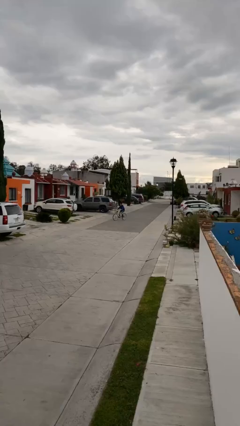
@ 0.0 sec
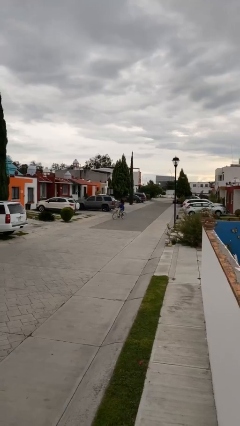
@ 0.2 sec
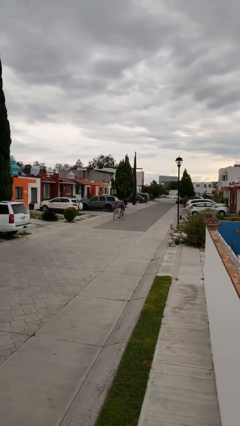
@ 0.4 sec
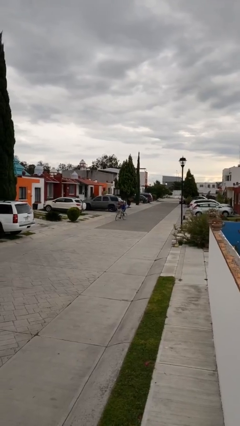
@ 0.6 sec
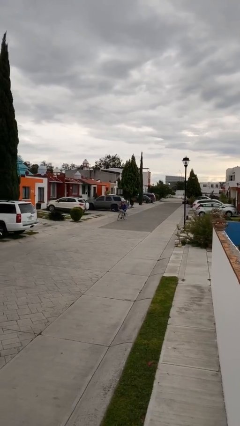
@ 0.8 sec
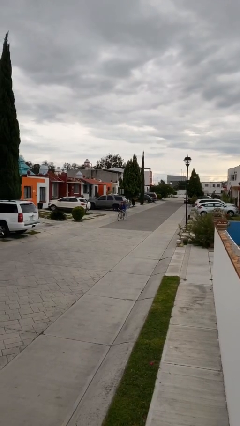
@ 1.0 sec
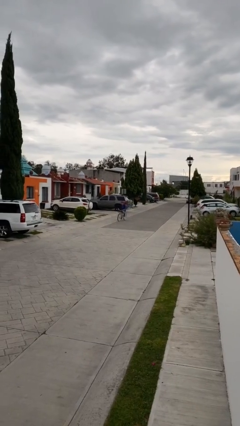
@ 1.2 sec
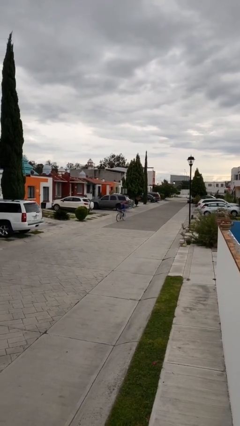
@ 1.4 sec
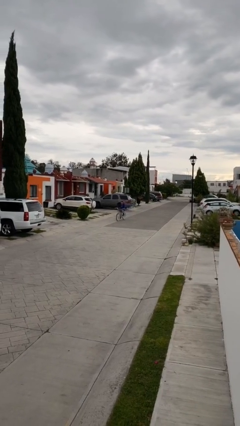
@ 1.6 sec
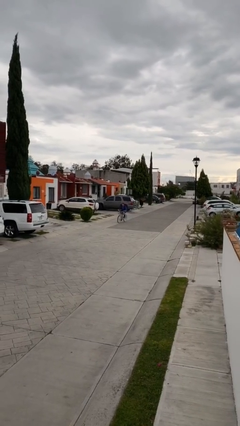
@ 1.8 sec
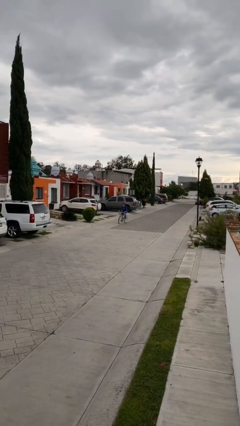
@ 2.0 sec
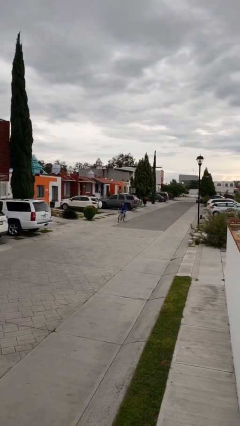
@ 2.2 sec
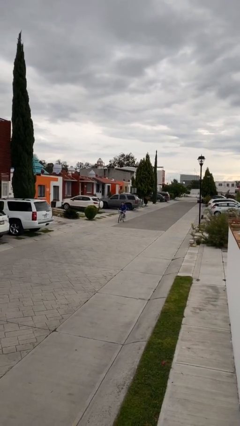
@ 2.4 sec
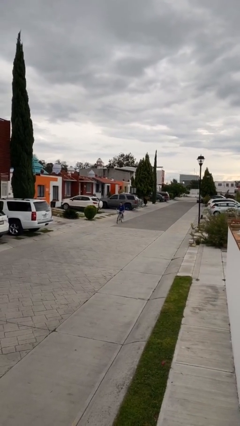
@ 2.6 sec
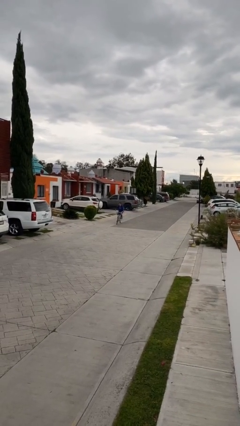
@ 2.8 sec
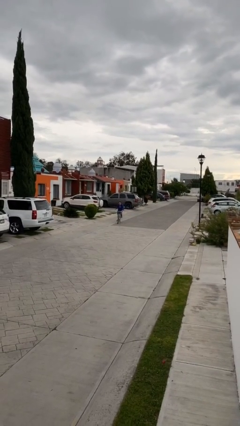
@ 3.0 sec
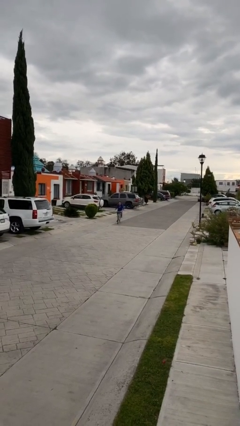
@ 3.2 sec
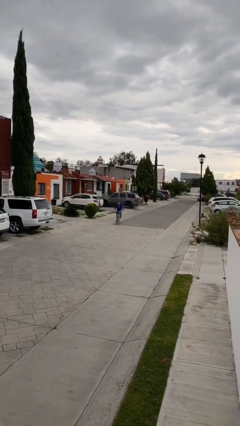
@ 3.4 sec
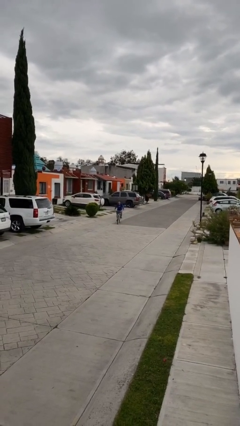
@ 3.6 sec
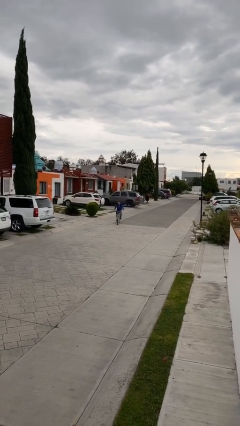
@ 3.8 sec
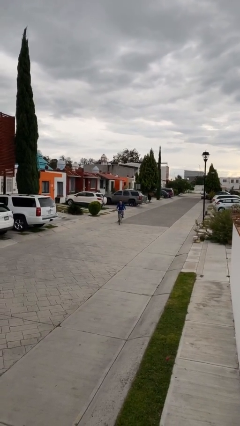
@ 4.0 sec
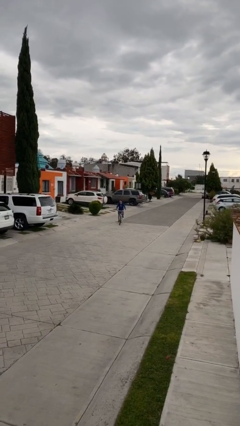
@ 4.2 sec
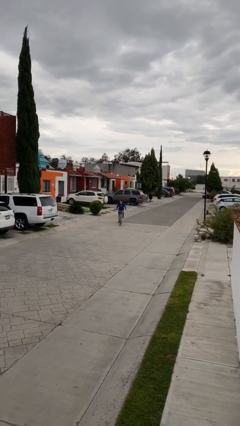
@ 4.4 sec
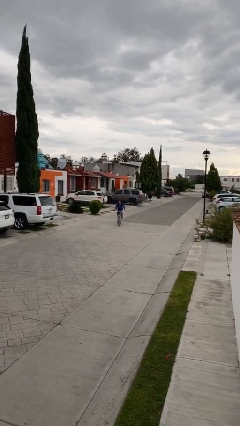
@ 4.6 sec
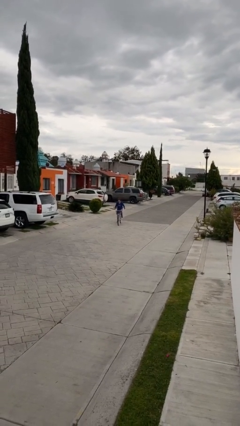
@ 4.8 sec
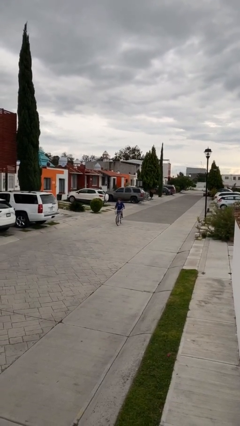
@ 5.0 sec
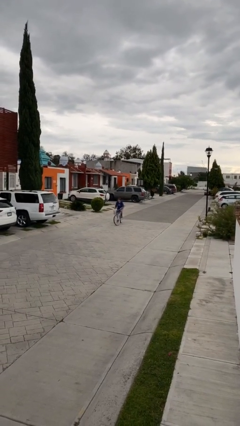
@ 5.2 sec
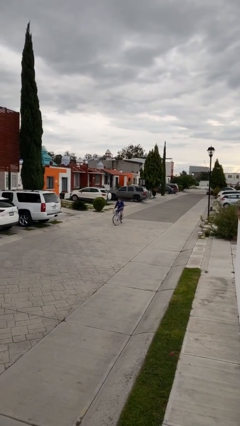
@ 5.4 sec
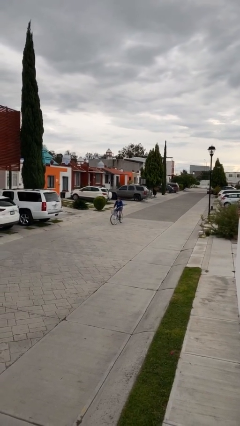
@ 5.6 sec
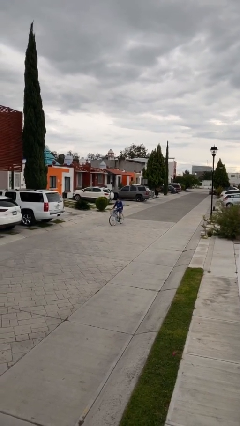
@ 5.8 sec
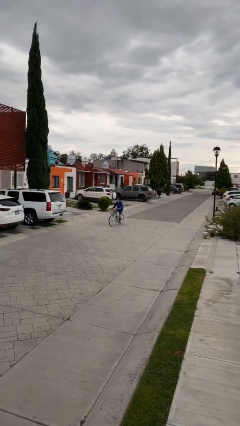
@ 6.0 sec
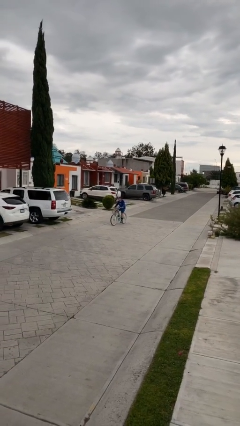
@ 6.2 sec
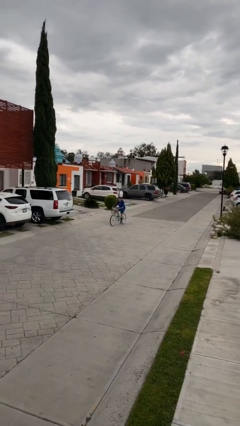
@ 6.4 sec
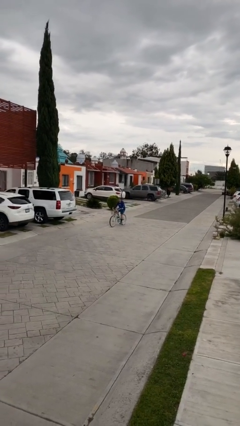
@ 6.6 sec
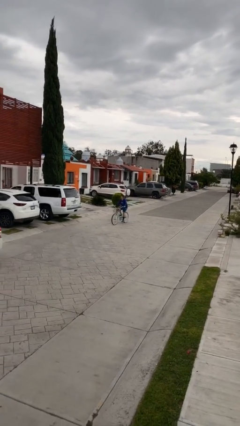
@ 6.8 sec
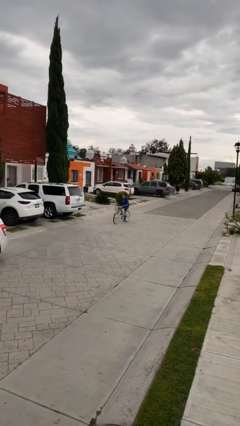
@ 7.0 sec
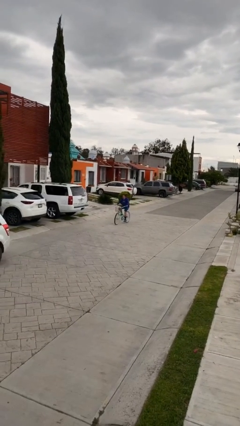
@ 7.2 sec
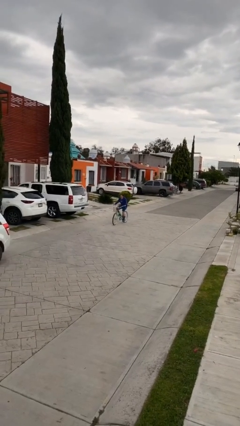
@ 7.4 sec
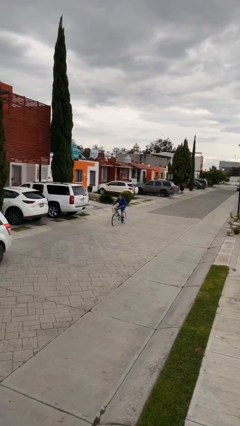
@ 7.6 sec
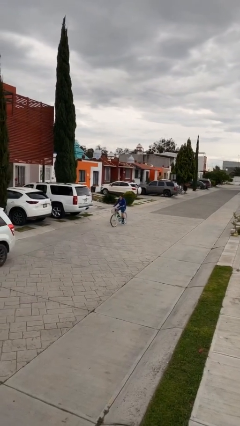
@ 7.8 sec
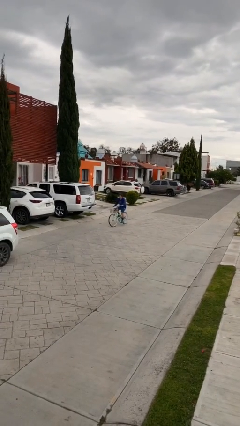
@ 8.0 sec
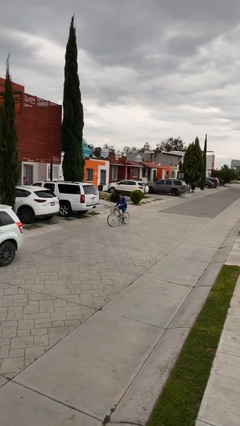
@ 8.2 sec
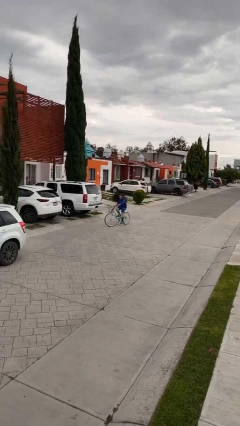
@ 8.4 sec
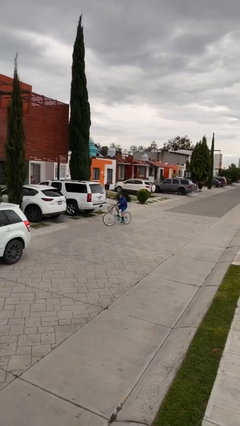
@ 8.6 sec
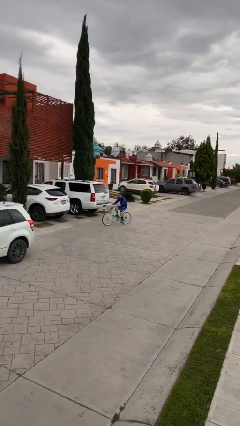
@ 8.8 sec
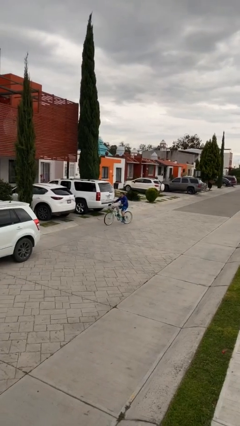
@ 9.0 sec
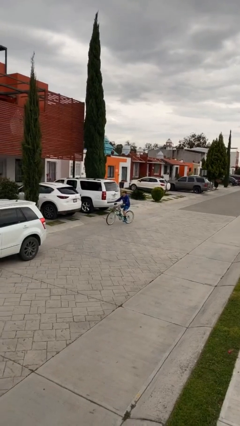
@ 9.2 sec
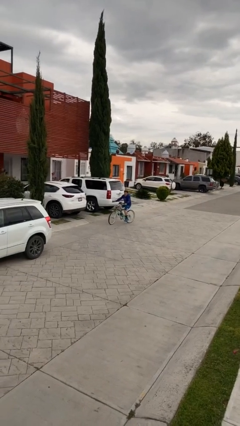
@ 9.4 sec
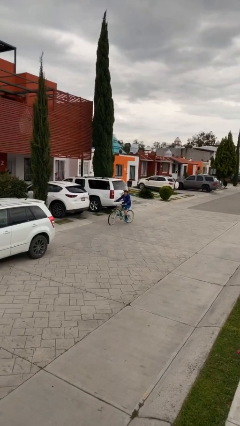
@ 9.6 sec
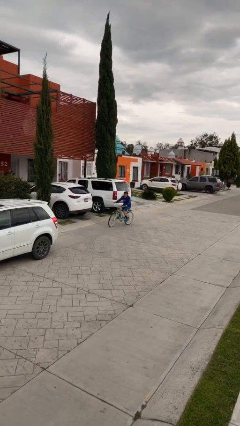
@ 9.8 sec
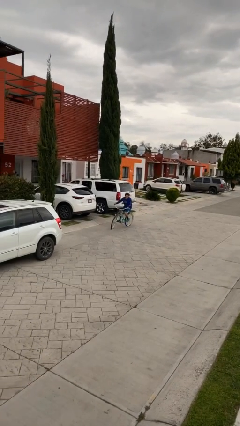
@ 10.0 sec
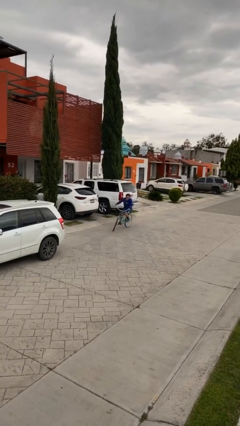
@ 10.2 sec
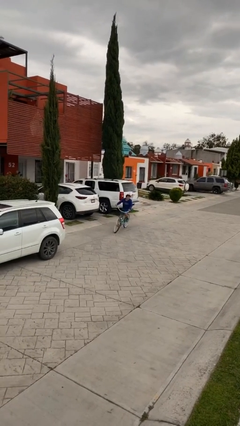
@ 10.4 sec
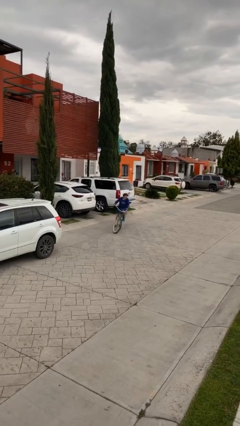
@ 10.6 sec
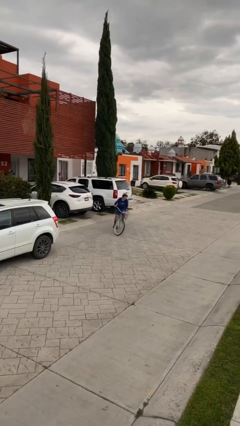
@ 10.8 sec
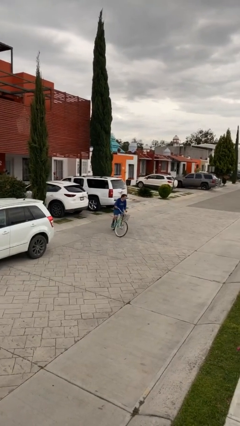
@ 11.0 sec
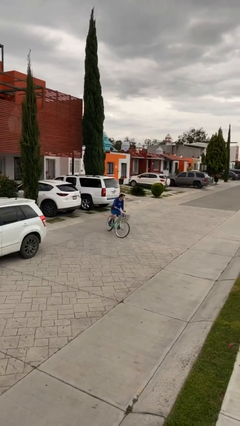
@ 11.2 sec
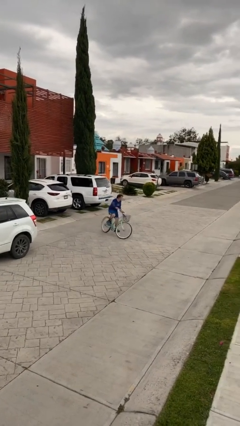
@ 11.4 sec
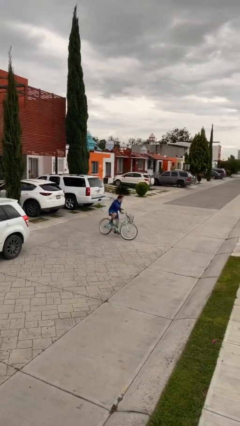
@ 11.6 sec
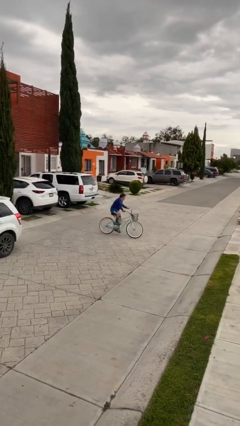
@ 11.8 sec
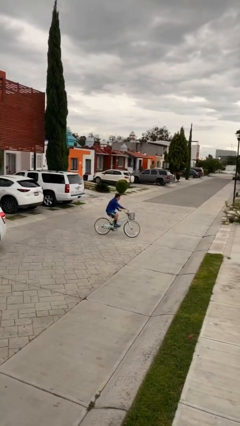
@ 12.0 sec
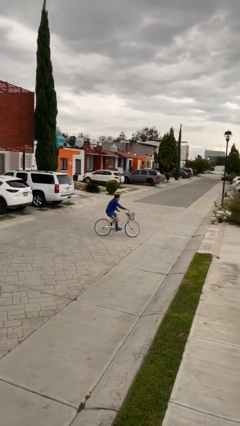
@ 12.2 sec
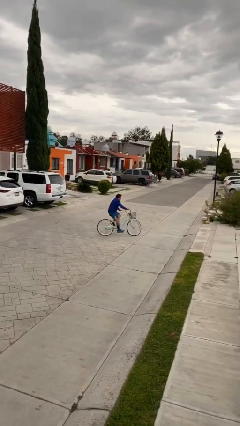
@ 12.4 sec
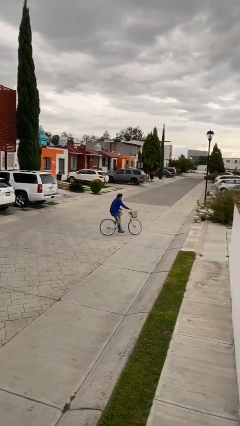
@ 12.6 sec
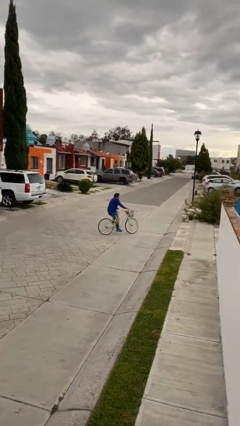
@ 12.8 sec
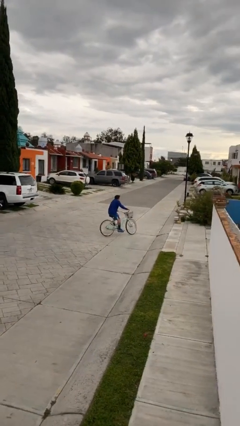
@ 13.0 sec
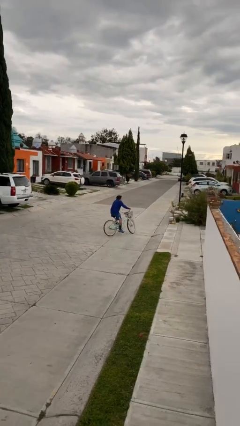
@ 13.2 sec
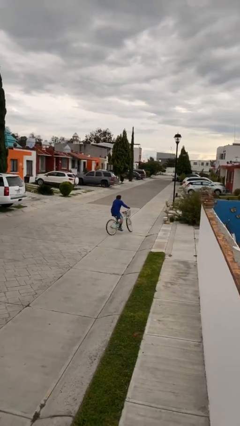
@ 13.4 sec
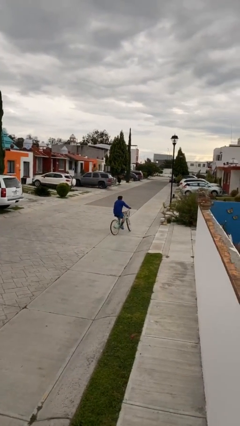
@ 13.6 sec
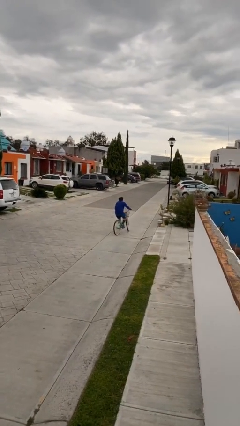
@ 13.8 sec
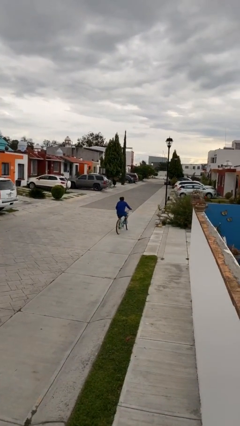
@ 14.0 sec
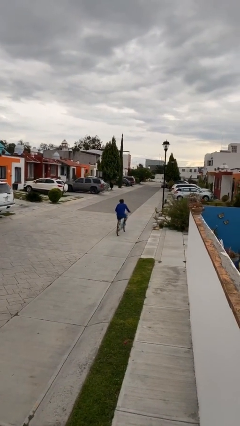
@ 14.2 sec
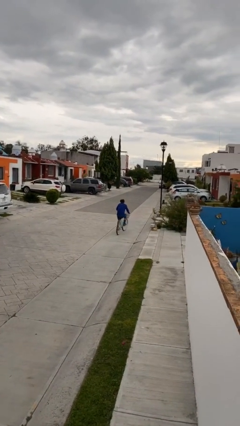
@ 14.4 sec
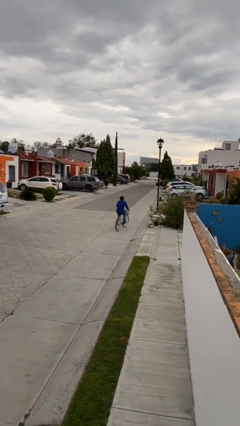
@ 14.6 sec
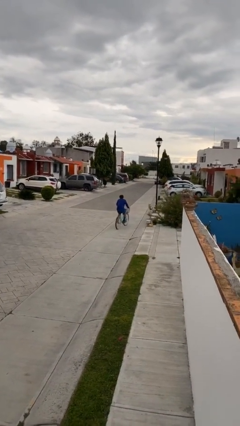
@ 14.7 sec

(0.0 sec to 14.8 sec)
person rides bicycle

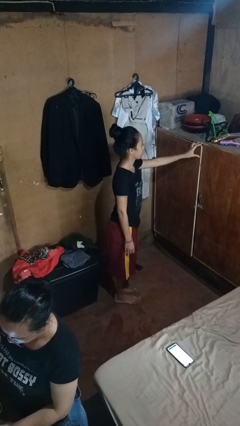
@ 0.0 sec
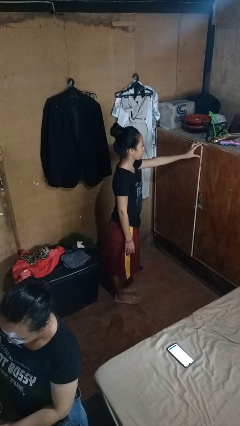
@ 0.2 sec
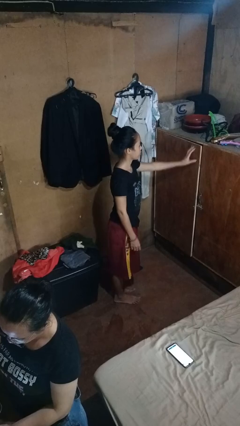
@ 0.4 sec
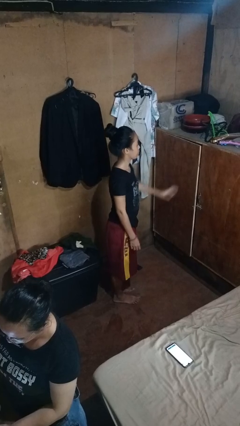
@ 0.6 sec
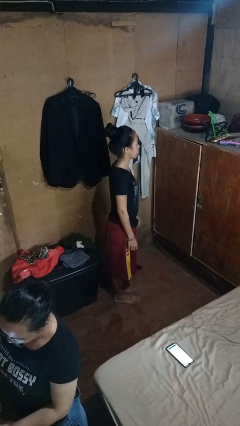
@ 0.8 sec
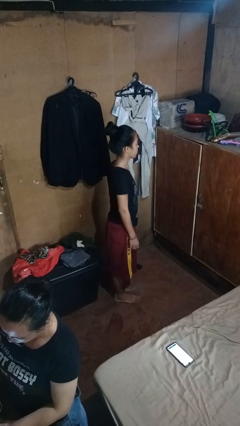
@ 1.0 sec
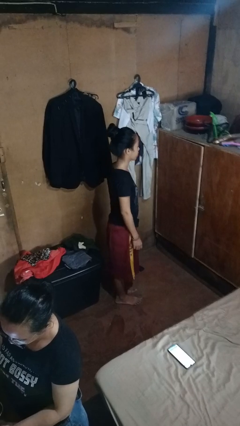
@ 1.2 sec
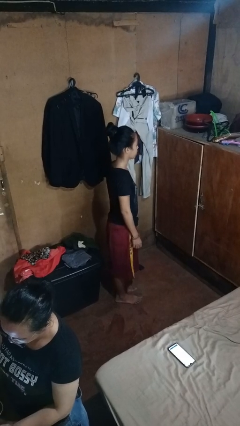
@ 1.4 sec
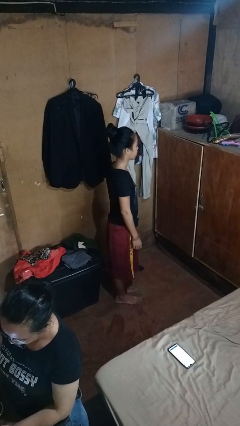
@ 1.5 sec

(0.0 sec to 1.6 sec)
person closes closet door

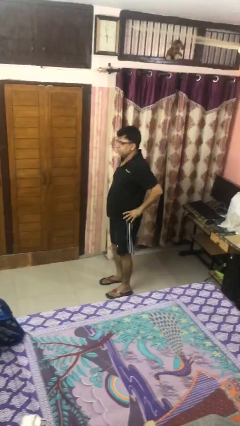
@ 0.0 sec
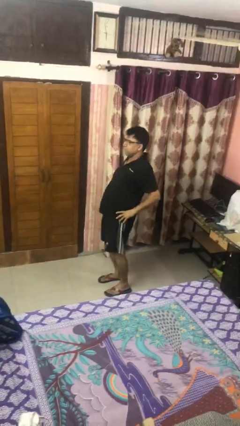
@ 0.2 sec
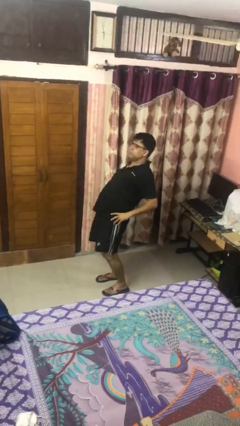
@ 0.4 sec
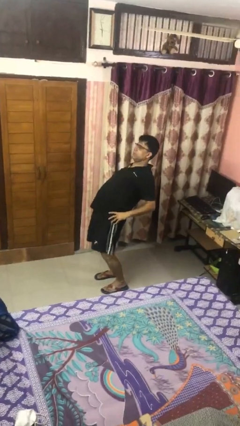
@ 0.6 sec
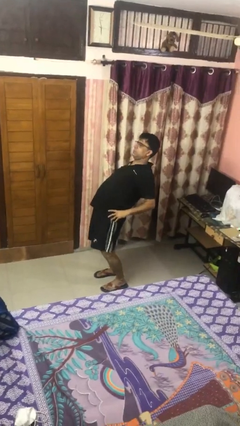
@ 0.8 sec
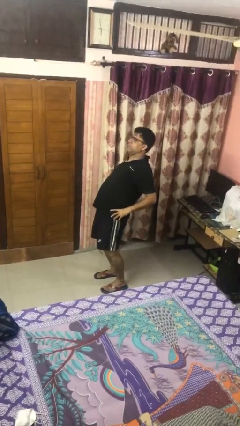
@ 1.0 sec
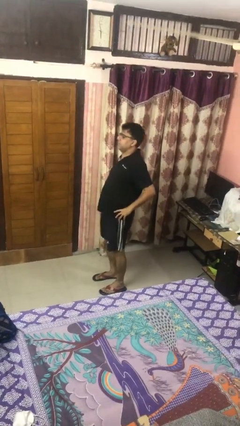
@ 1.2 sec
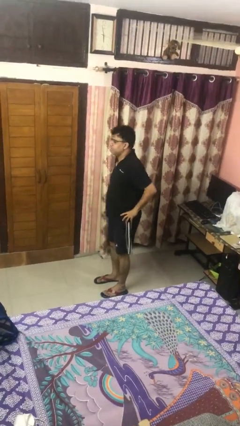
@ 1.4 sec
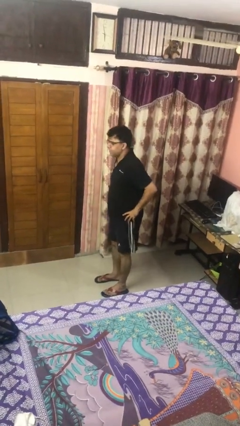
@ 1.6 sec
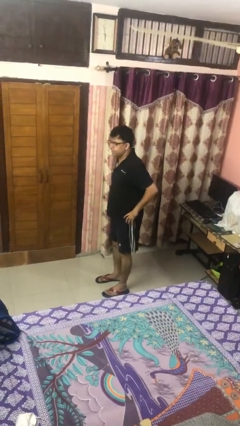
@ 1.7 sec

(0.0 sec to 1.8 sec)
person stretches back
